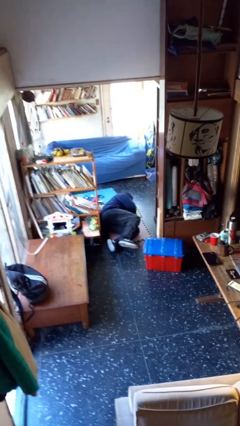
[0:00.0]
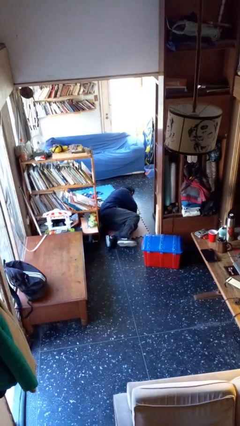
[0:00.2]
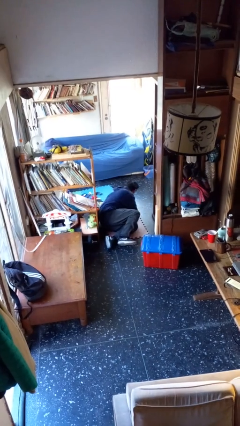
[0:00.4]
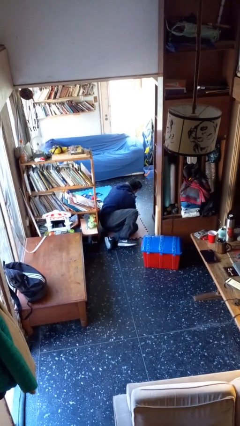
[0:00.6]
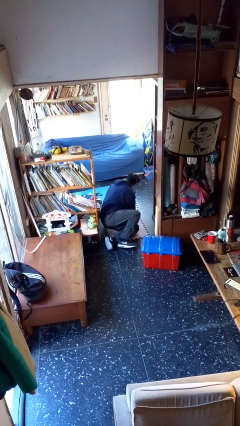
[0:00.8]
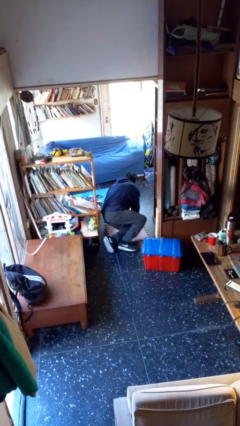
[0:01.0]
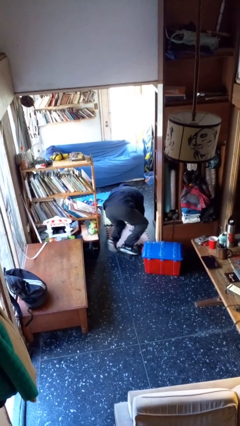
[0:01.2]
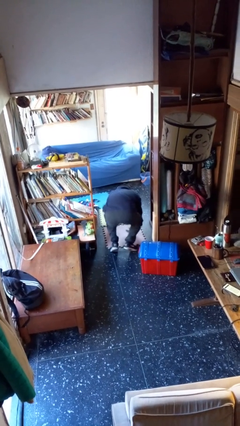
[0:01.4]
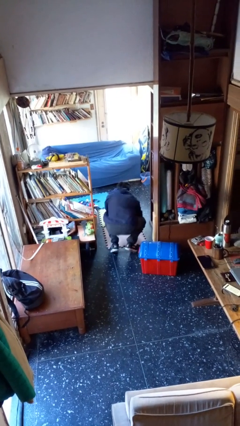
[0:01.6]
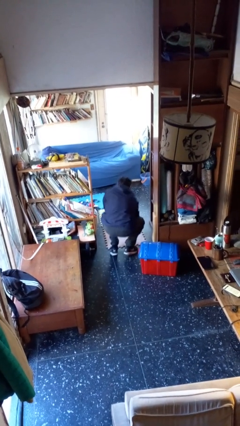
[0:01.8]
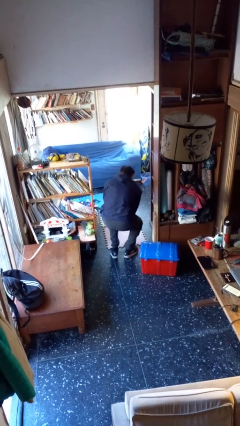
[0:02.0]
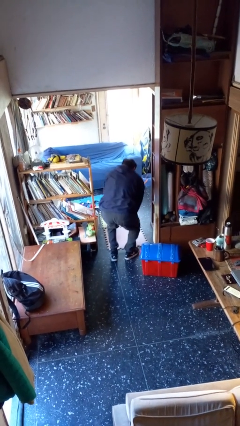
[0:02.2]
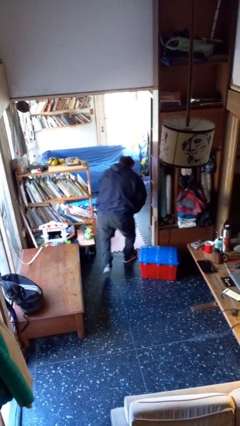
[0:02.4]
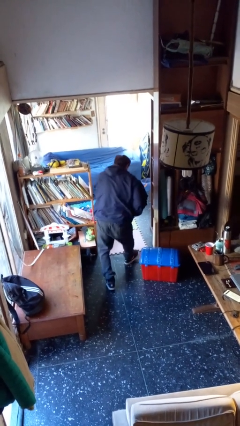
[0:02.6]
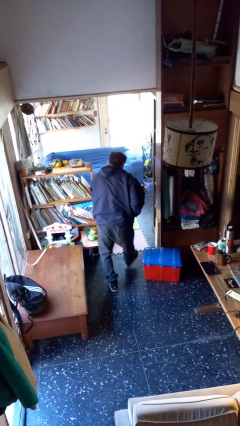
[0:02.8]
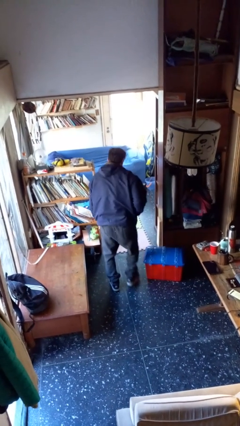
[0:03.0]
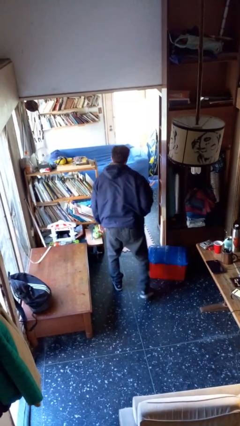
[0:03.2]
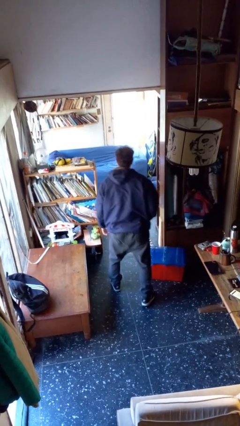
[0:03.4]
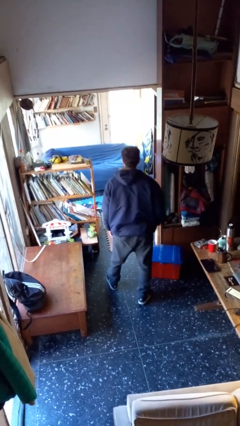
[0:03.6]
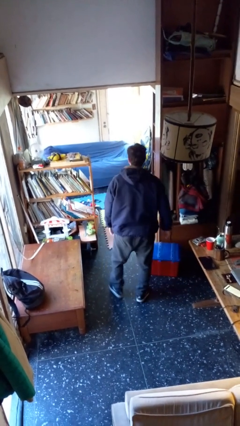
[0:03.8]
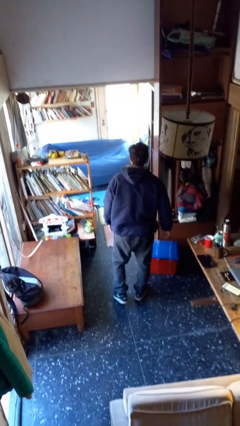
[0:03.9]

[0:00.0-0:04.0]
person stands up from floor

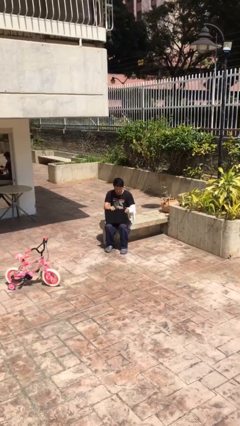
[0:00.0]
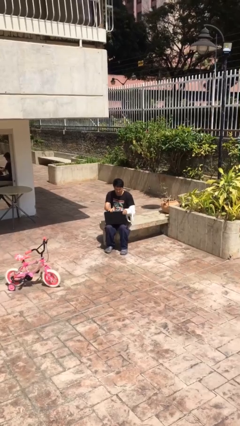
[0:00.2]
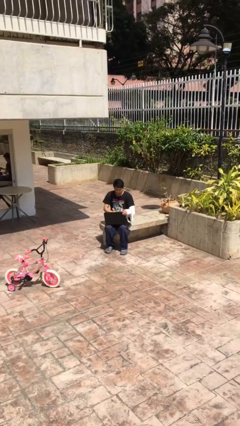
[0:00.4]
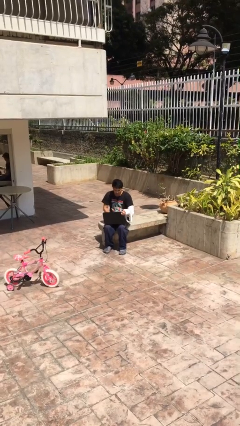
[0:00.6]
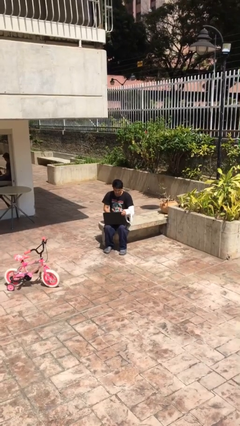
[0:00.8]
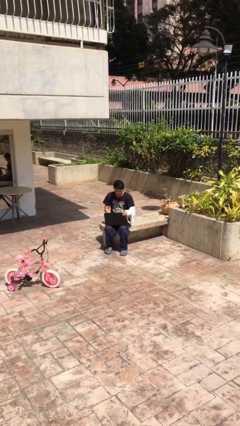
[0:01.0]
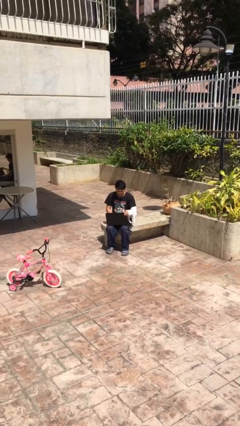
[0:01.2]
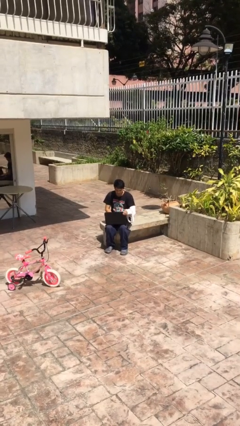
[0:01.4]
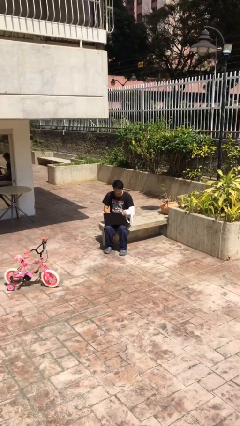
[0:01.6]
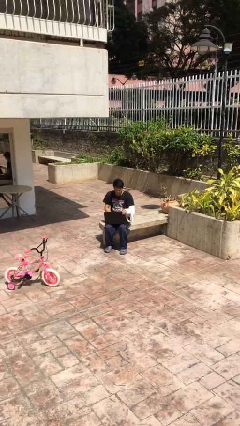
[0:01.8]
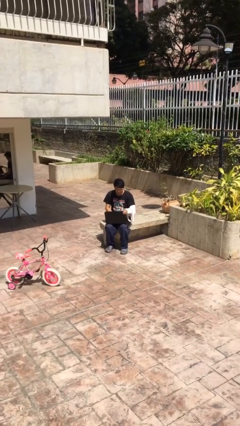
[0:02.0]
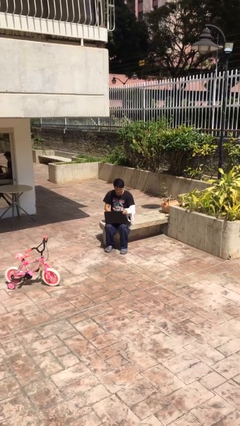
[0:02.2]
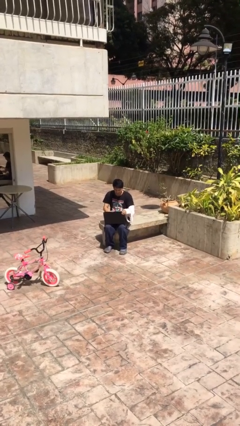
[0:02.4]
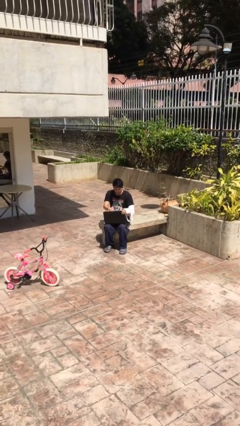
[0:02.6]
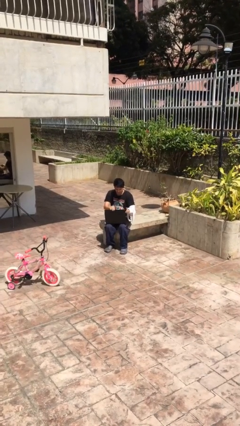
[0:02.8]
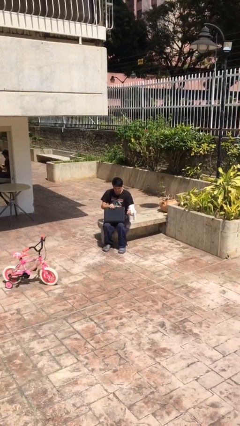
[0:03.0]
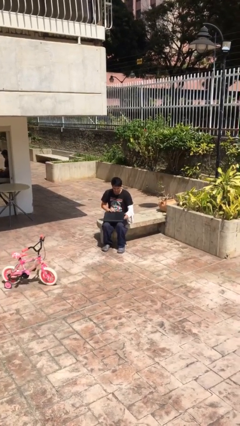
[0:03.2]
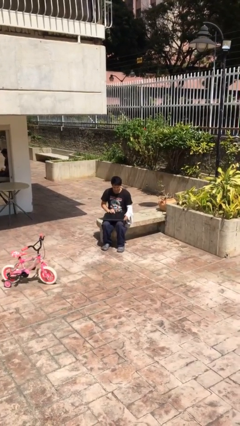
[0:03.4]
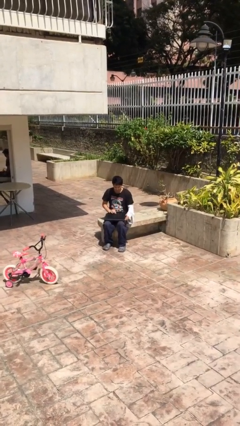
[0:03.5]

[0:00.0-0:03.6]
person interacts with laptop

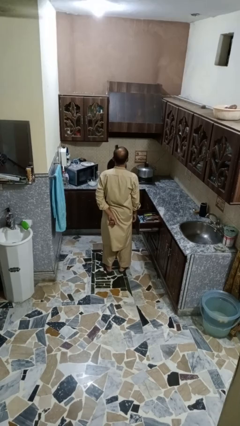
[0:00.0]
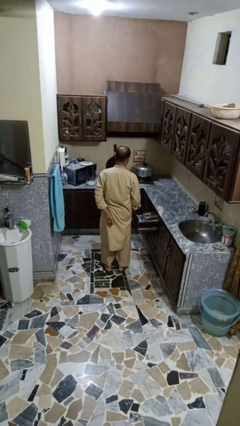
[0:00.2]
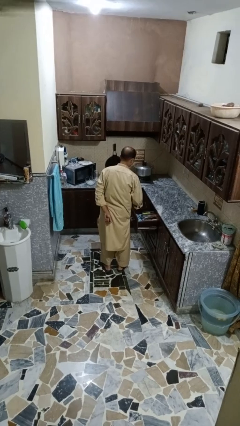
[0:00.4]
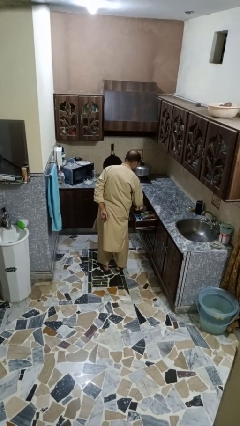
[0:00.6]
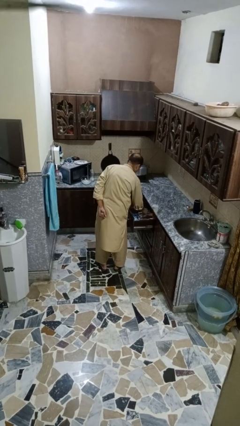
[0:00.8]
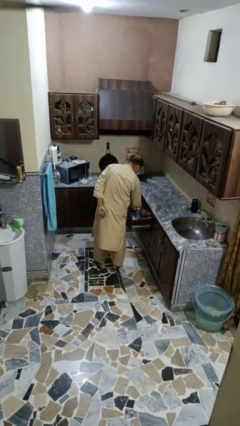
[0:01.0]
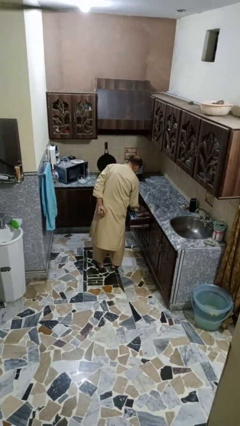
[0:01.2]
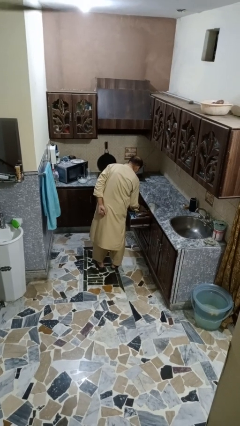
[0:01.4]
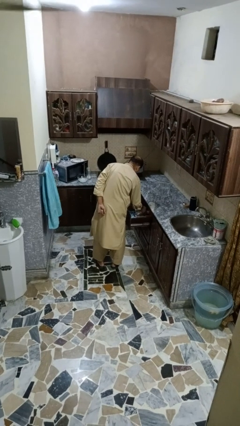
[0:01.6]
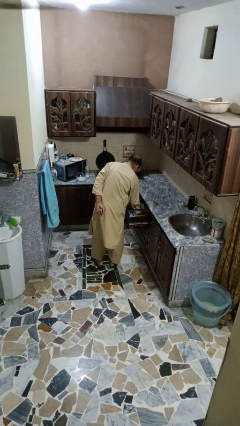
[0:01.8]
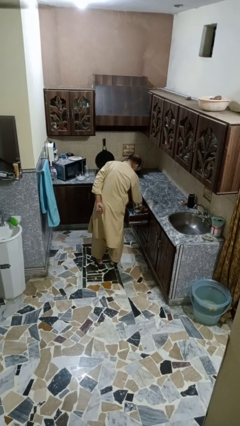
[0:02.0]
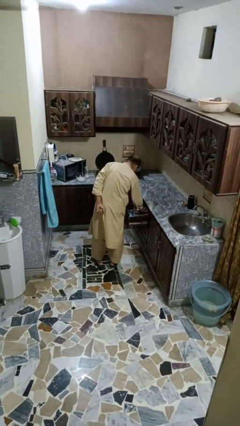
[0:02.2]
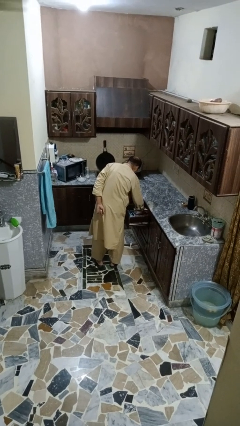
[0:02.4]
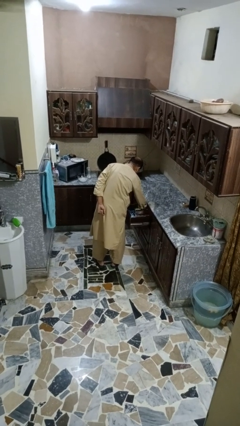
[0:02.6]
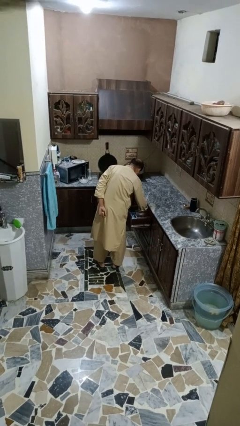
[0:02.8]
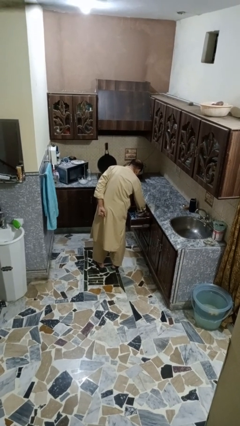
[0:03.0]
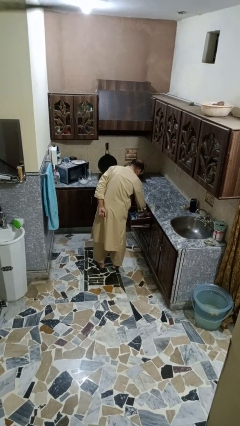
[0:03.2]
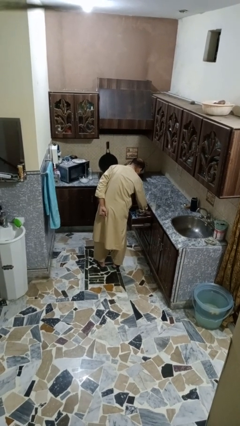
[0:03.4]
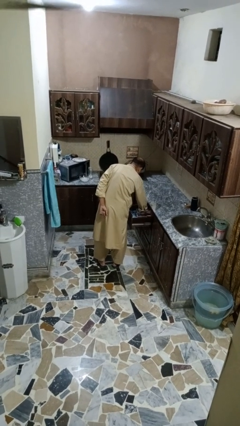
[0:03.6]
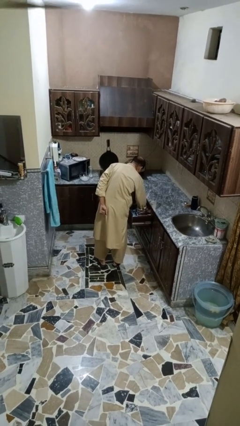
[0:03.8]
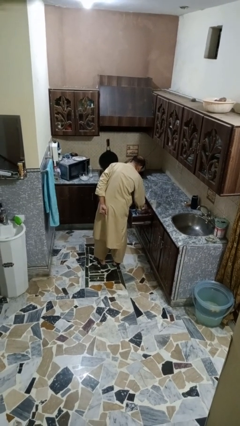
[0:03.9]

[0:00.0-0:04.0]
person searches in kitchen drawer

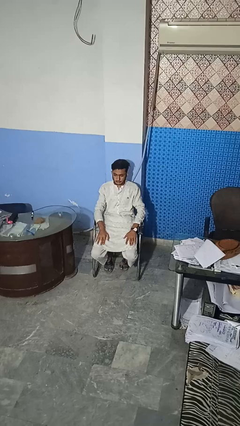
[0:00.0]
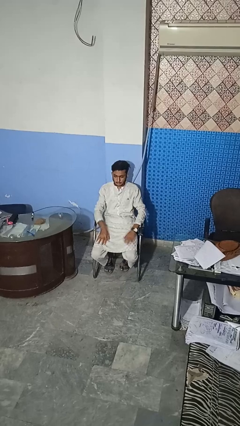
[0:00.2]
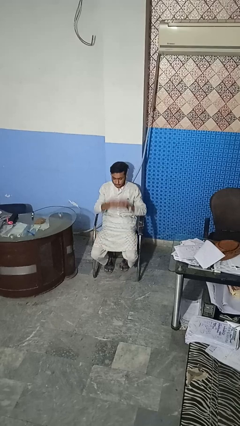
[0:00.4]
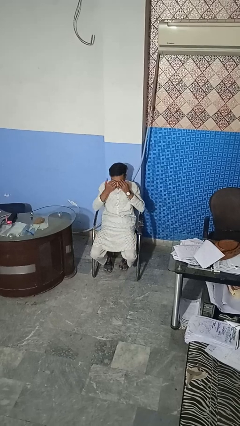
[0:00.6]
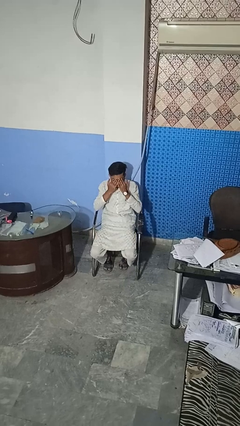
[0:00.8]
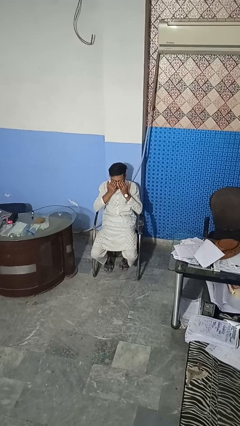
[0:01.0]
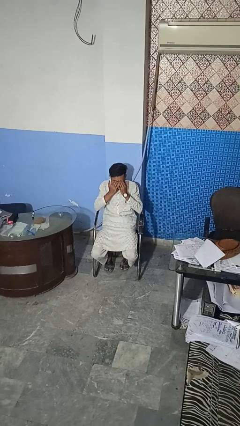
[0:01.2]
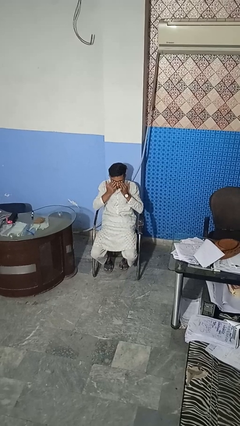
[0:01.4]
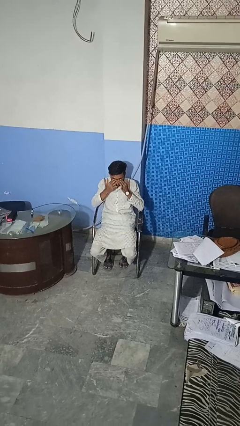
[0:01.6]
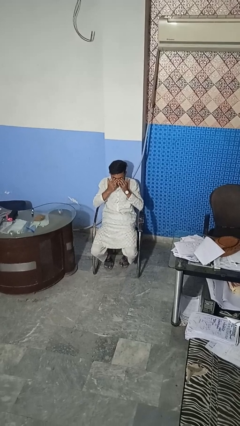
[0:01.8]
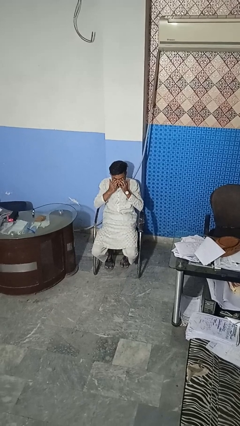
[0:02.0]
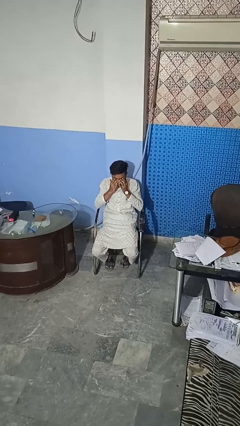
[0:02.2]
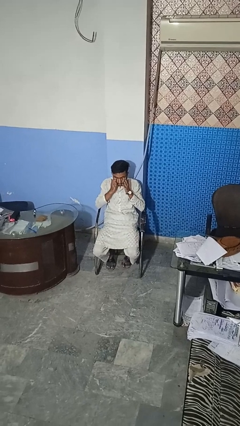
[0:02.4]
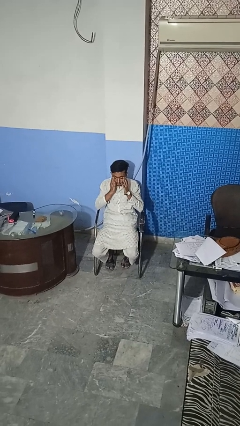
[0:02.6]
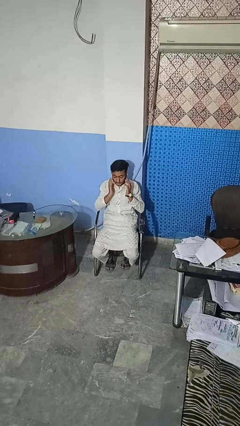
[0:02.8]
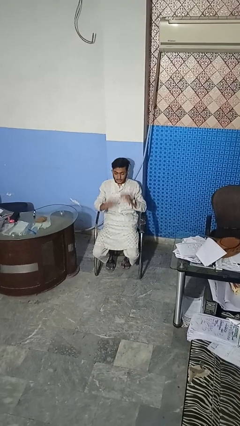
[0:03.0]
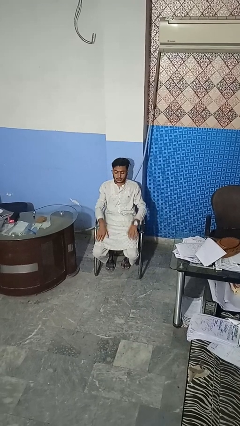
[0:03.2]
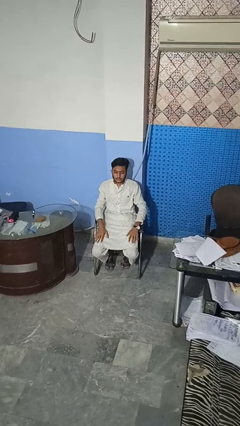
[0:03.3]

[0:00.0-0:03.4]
person rubs eyes

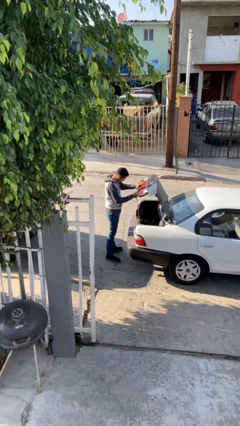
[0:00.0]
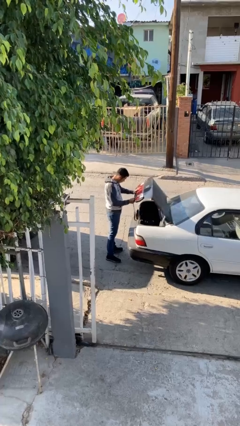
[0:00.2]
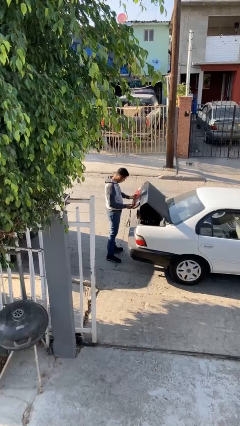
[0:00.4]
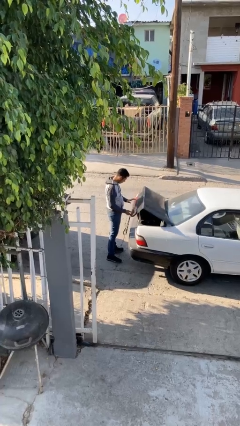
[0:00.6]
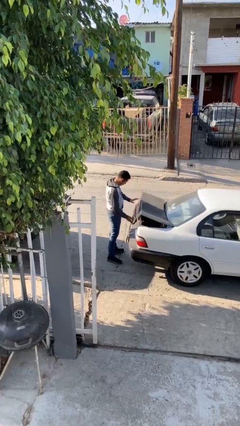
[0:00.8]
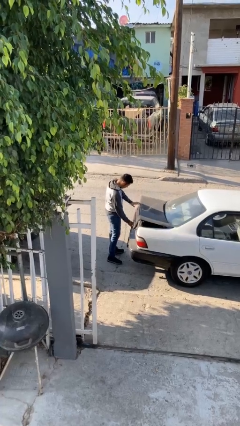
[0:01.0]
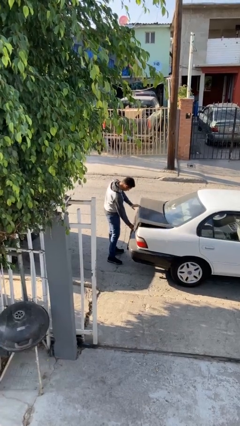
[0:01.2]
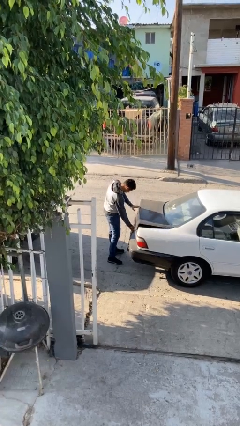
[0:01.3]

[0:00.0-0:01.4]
person closes car trunk

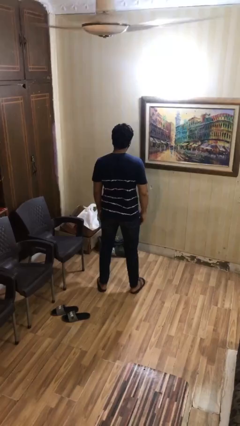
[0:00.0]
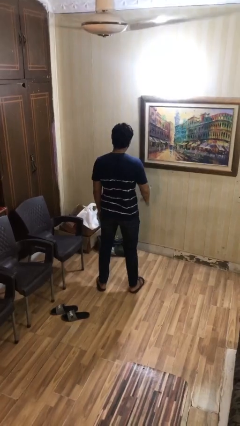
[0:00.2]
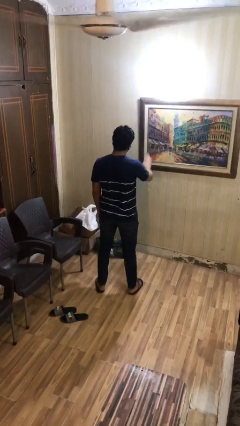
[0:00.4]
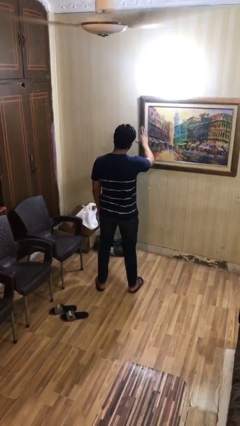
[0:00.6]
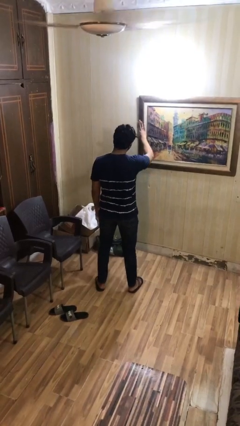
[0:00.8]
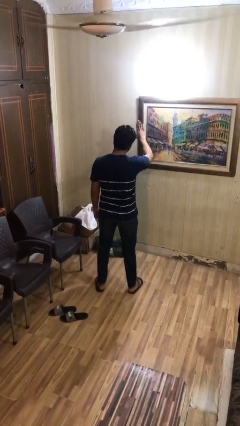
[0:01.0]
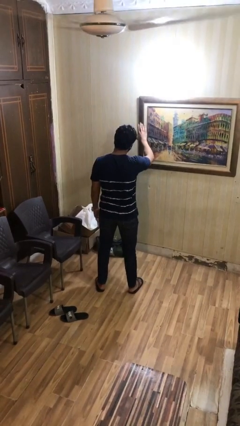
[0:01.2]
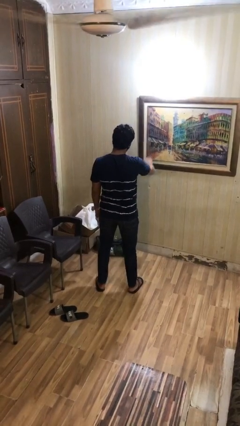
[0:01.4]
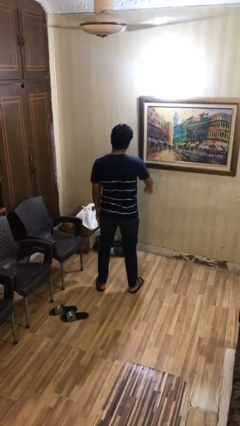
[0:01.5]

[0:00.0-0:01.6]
person gestures stop
